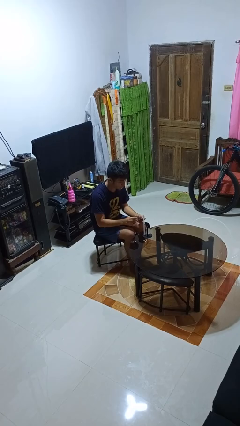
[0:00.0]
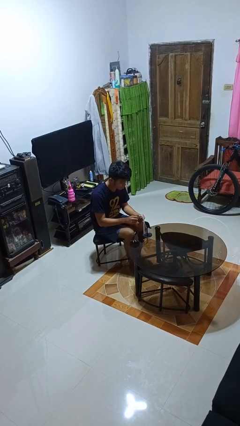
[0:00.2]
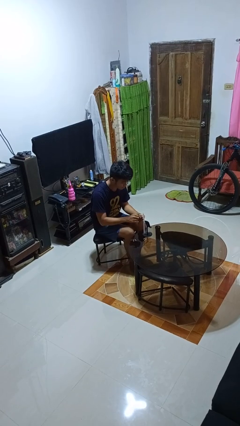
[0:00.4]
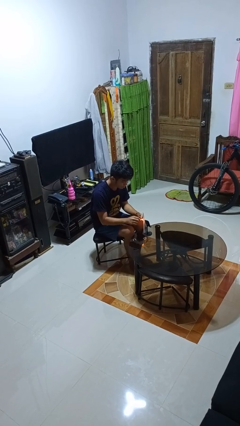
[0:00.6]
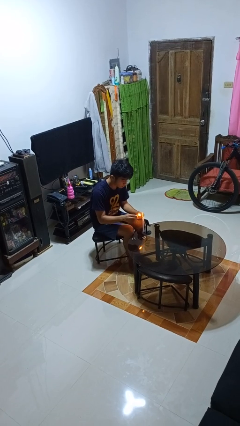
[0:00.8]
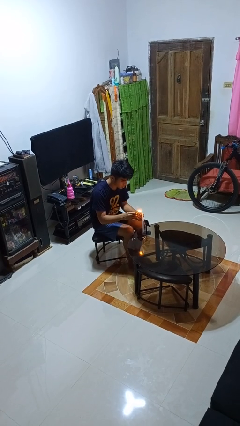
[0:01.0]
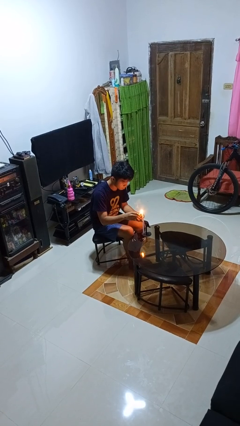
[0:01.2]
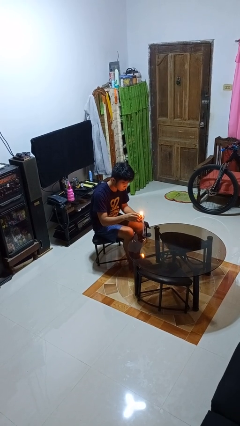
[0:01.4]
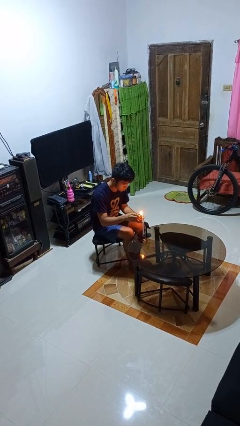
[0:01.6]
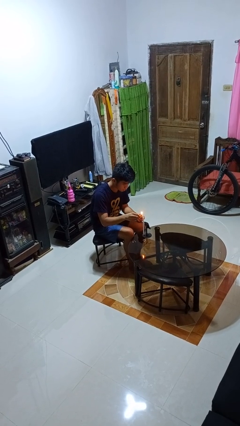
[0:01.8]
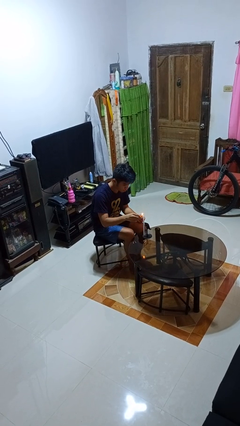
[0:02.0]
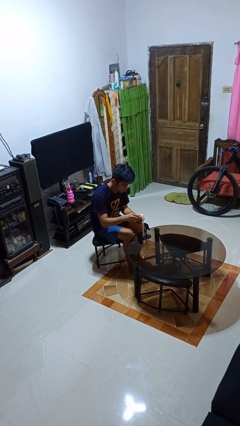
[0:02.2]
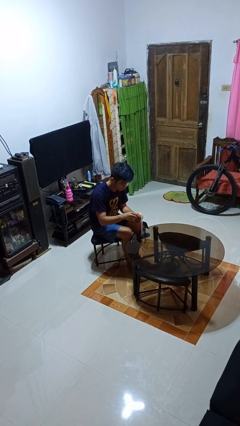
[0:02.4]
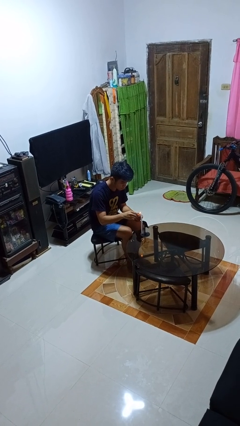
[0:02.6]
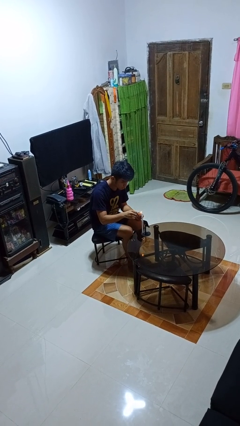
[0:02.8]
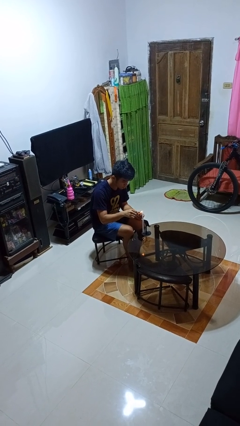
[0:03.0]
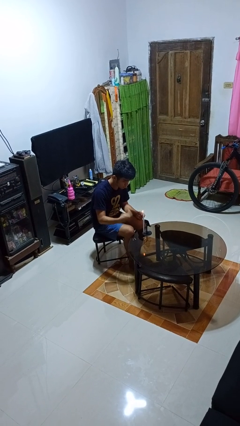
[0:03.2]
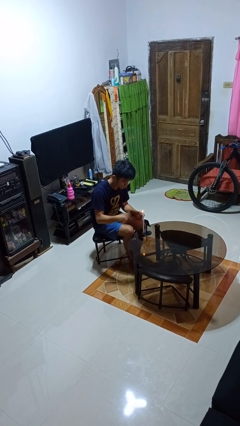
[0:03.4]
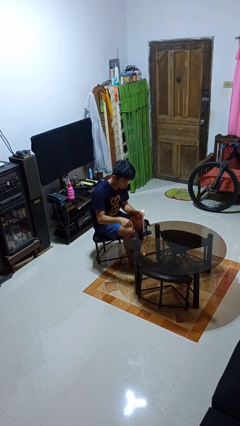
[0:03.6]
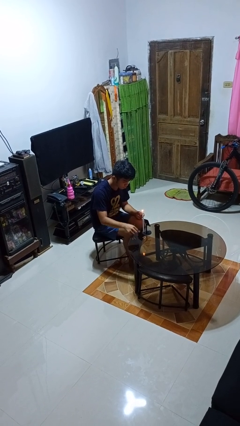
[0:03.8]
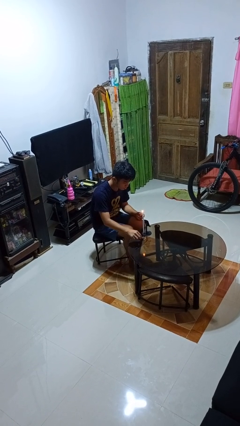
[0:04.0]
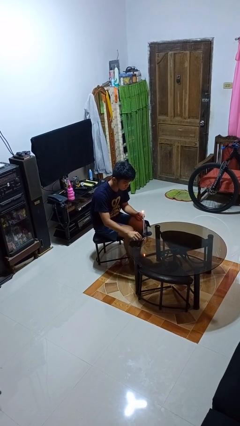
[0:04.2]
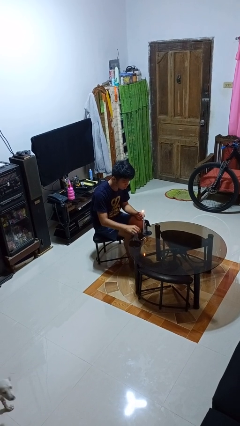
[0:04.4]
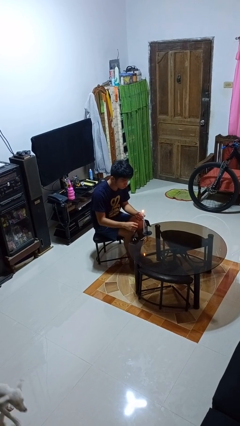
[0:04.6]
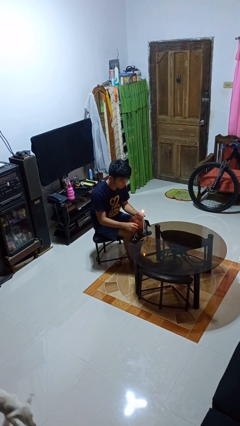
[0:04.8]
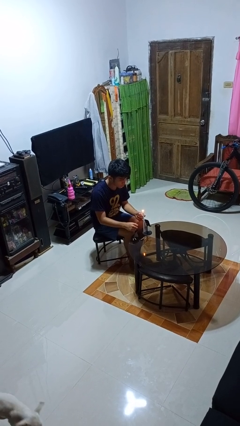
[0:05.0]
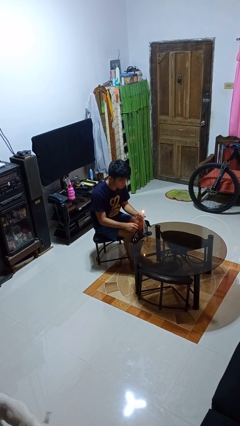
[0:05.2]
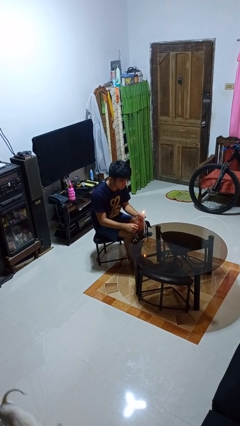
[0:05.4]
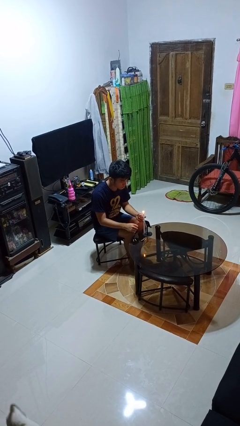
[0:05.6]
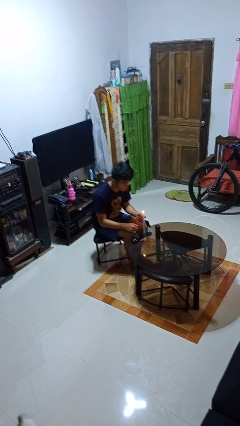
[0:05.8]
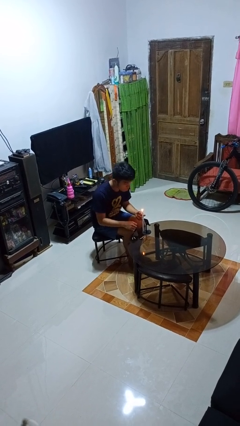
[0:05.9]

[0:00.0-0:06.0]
person lights candle

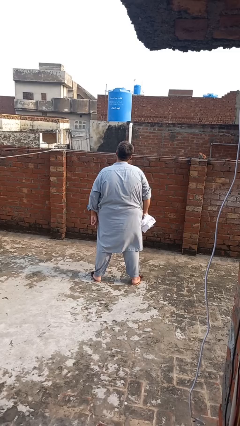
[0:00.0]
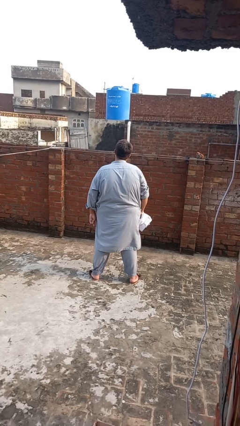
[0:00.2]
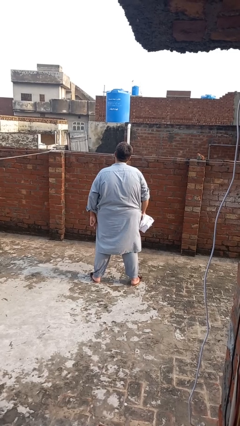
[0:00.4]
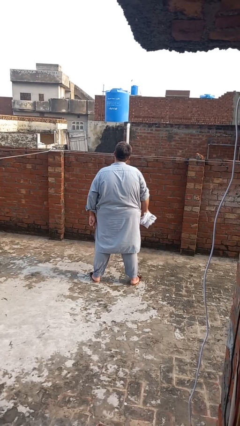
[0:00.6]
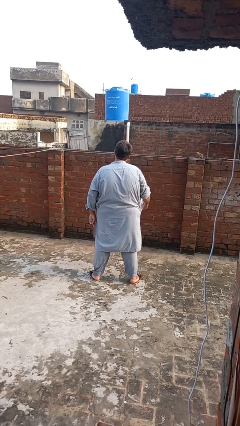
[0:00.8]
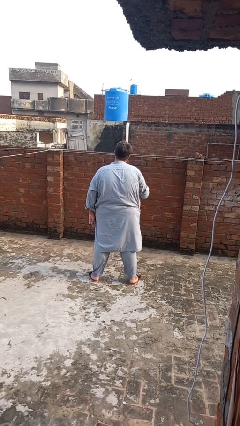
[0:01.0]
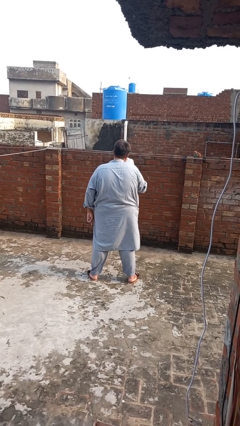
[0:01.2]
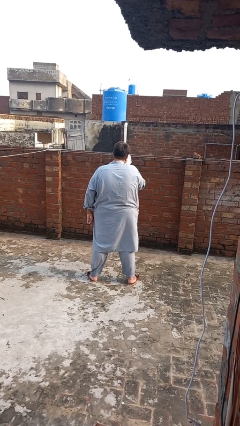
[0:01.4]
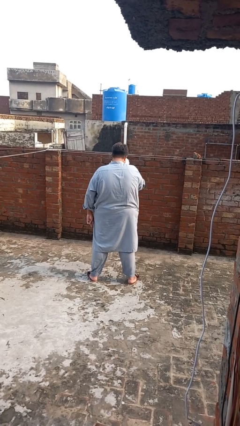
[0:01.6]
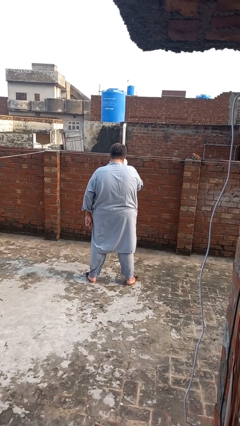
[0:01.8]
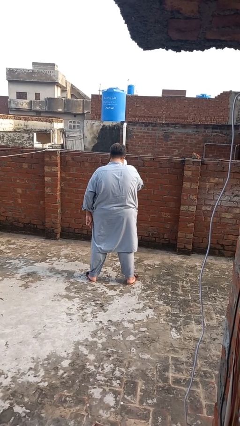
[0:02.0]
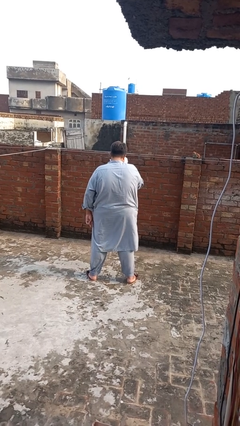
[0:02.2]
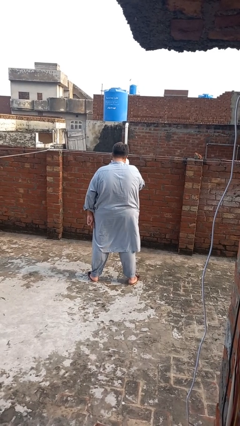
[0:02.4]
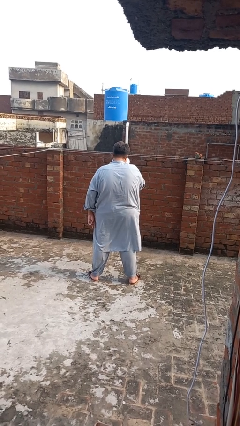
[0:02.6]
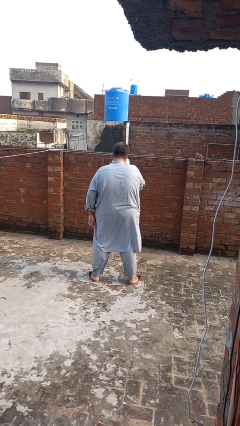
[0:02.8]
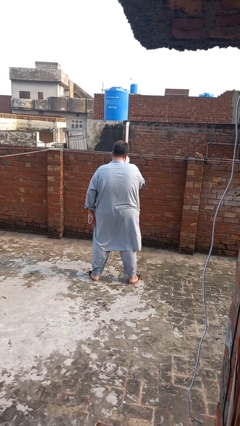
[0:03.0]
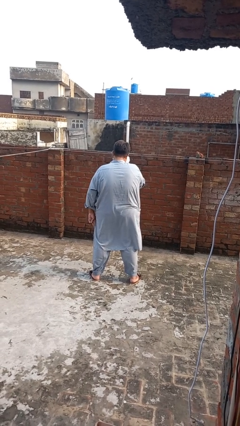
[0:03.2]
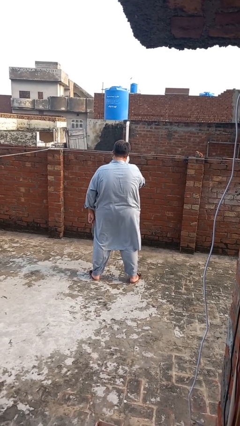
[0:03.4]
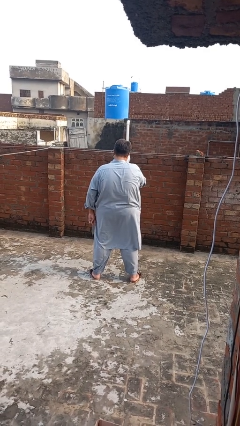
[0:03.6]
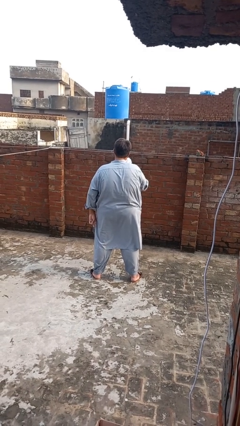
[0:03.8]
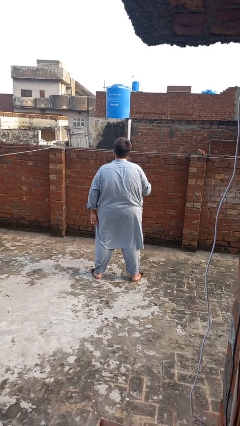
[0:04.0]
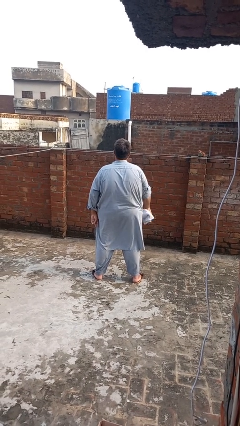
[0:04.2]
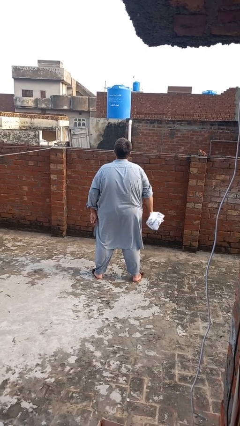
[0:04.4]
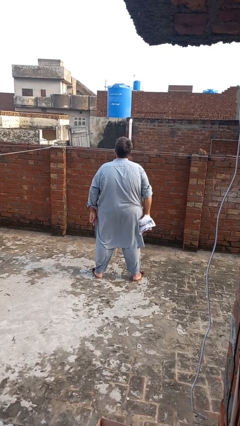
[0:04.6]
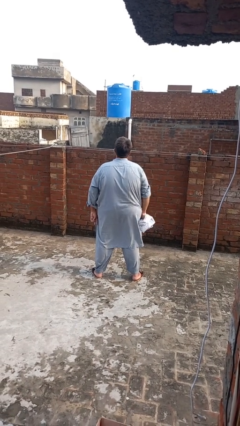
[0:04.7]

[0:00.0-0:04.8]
person blows nose

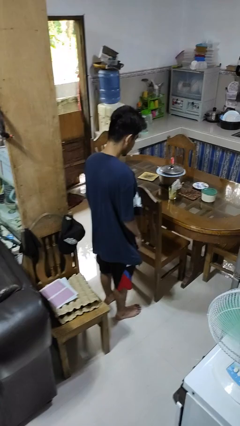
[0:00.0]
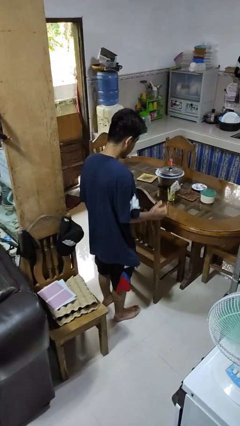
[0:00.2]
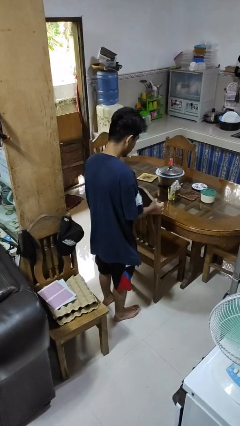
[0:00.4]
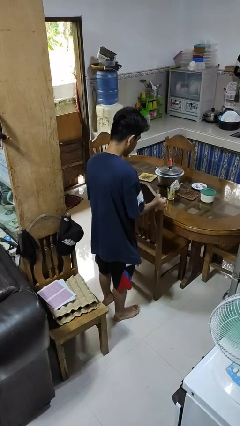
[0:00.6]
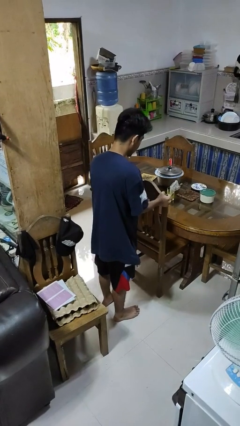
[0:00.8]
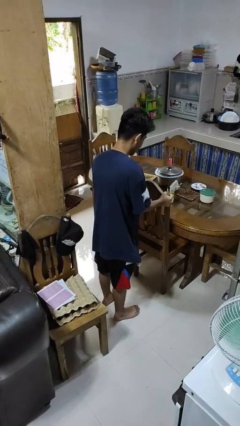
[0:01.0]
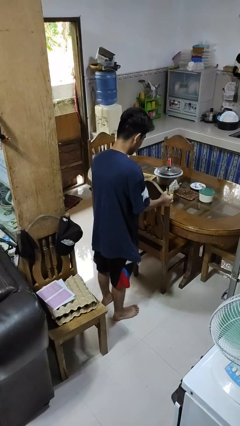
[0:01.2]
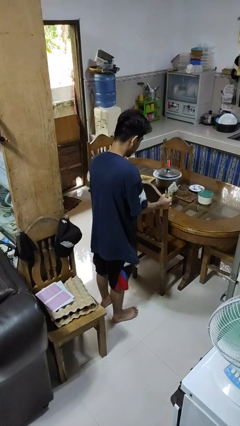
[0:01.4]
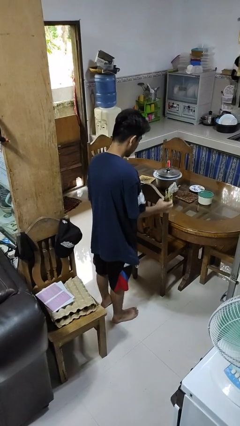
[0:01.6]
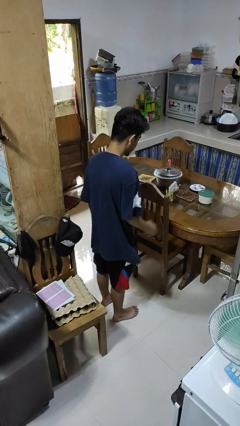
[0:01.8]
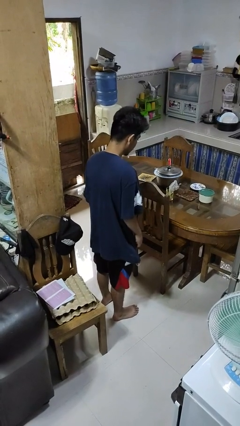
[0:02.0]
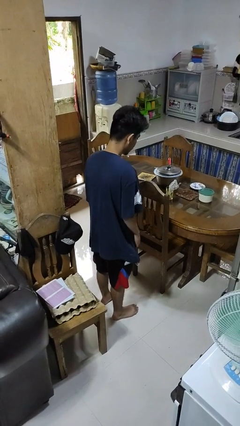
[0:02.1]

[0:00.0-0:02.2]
person pushes in chair

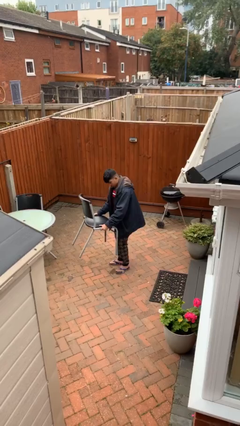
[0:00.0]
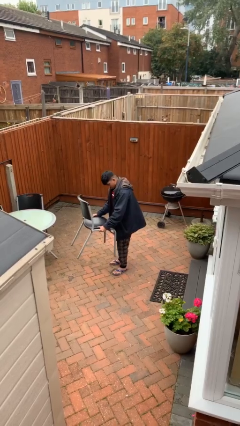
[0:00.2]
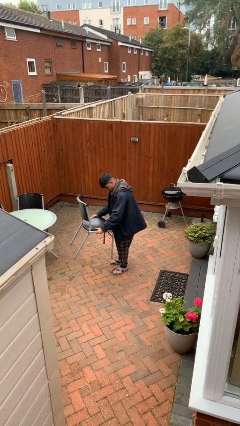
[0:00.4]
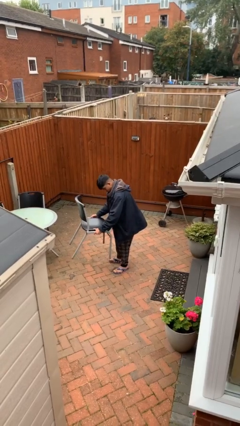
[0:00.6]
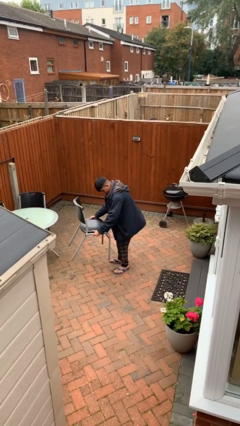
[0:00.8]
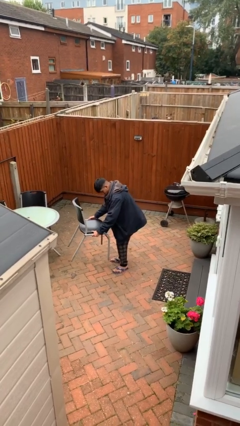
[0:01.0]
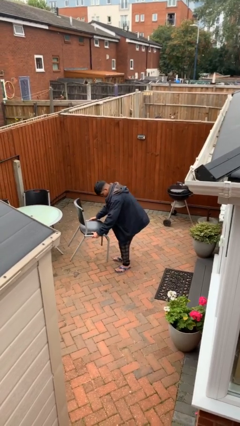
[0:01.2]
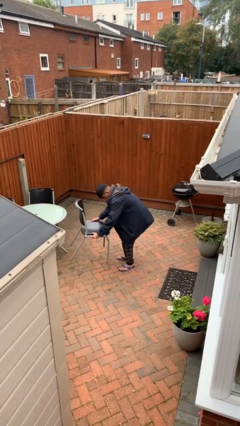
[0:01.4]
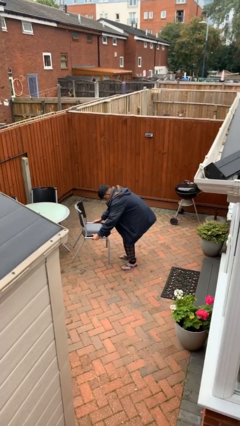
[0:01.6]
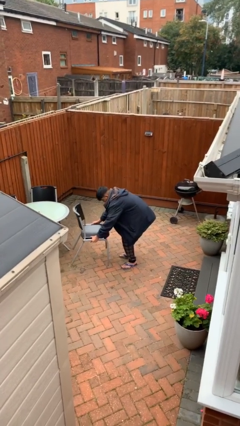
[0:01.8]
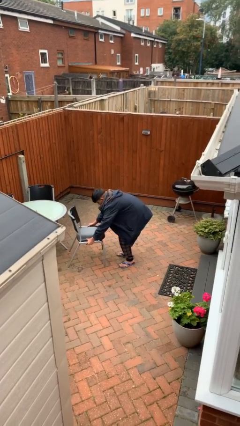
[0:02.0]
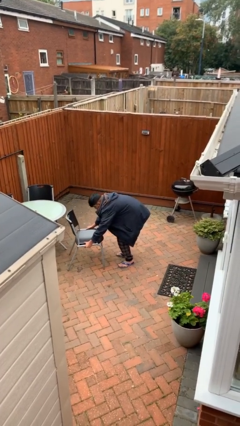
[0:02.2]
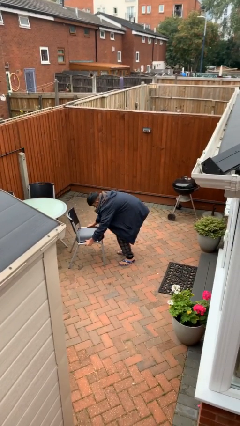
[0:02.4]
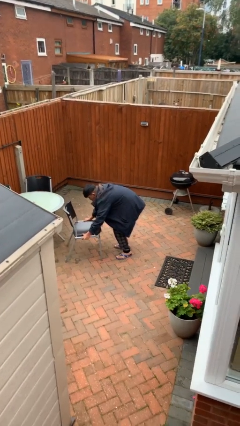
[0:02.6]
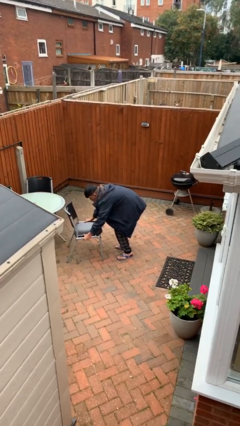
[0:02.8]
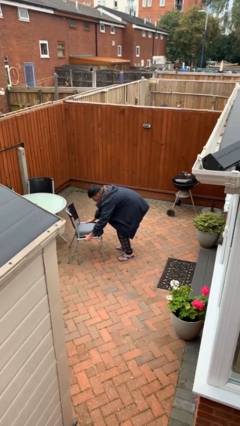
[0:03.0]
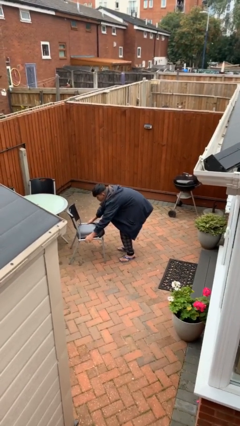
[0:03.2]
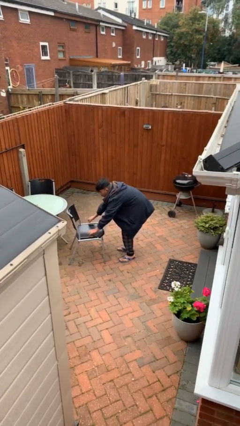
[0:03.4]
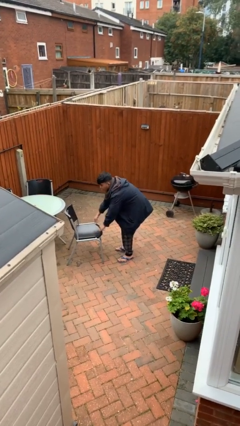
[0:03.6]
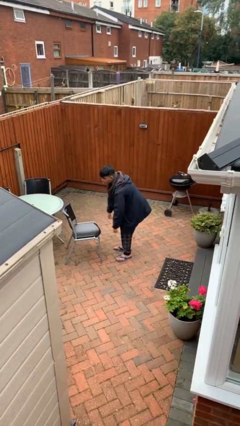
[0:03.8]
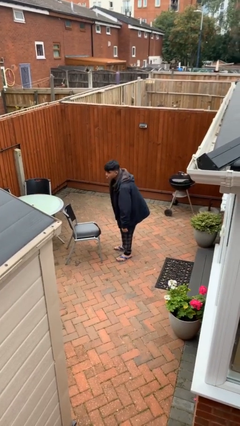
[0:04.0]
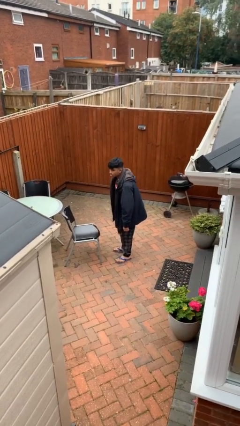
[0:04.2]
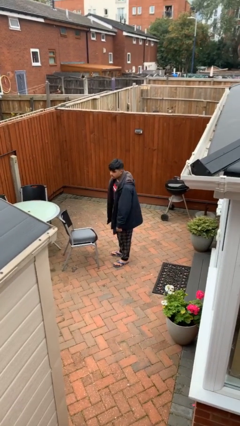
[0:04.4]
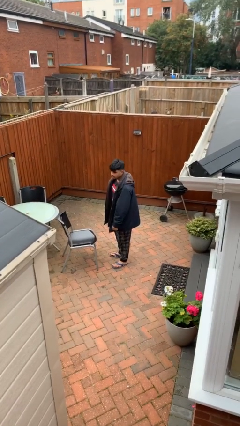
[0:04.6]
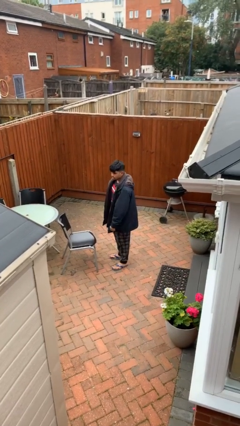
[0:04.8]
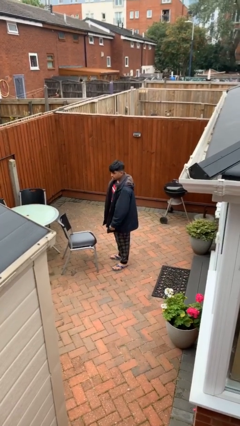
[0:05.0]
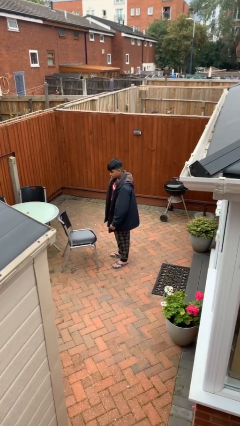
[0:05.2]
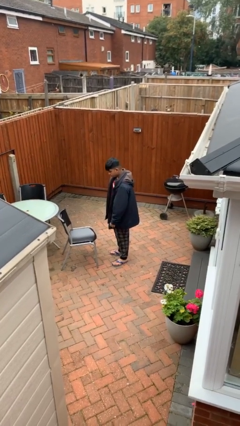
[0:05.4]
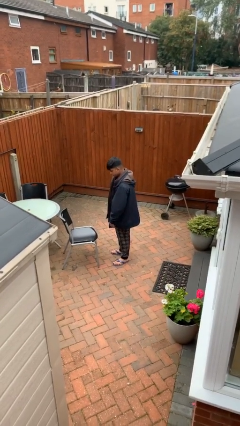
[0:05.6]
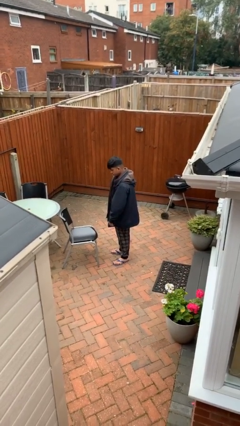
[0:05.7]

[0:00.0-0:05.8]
person puts down object on floor
